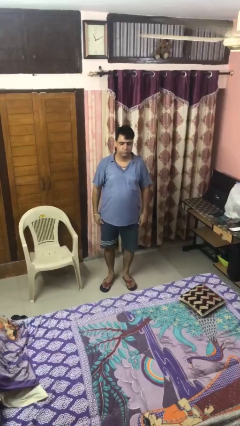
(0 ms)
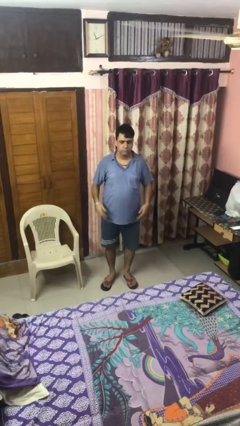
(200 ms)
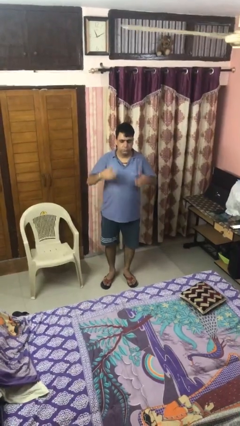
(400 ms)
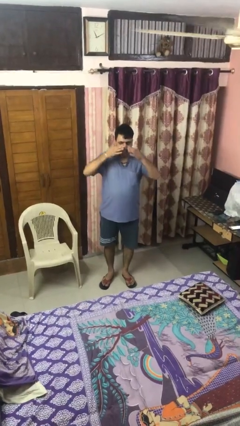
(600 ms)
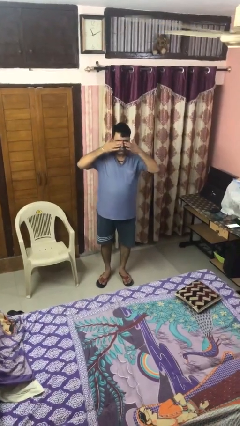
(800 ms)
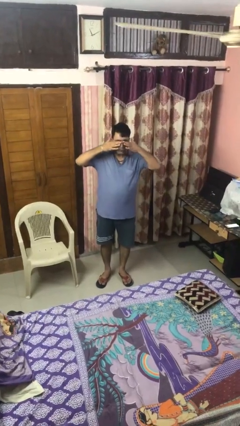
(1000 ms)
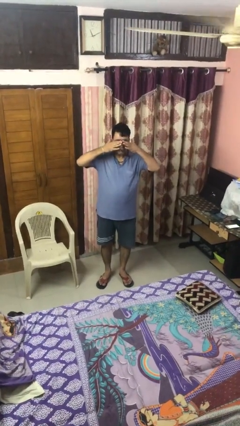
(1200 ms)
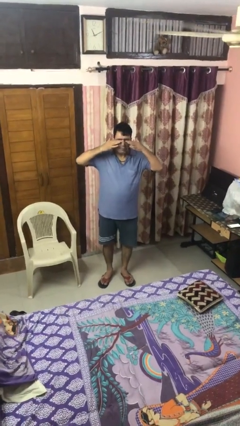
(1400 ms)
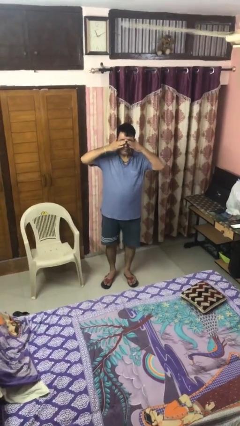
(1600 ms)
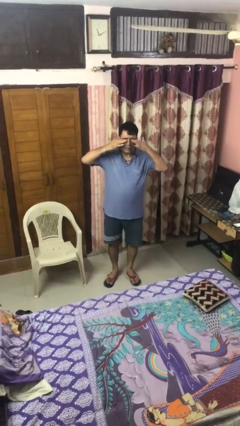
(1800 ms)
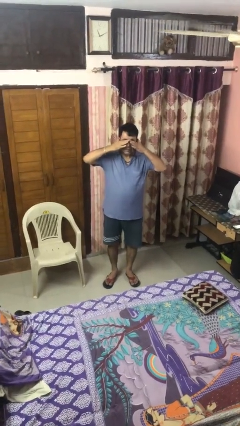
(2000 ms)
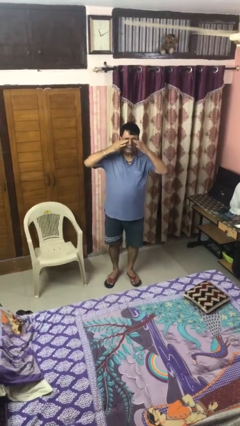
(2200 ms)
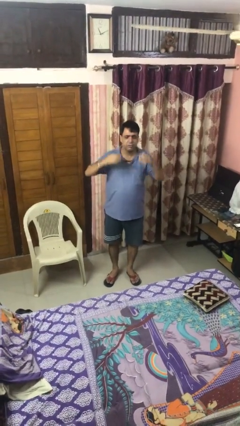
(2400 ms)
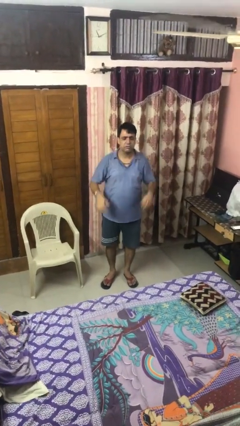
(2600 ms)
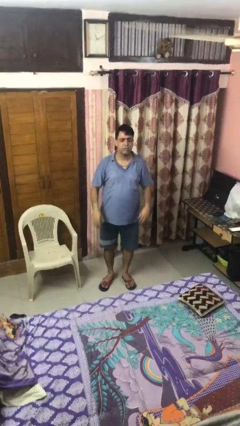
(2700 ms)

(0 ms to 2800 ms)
person rubs eyes

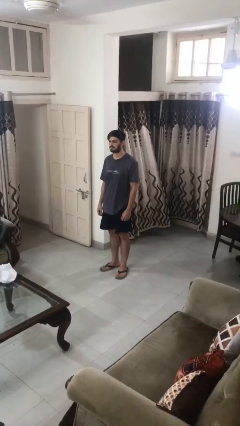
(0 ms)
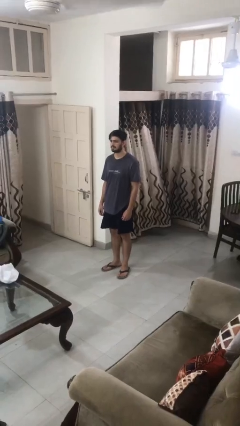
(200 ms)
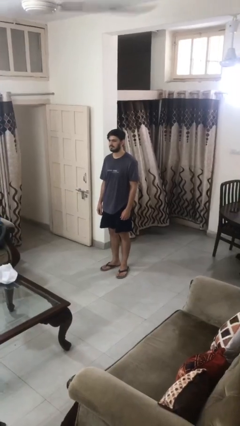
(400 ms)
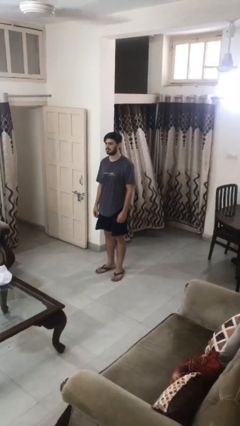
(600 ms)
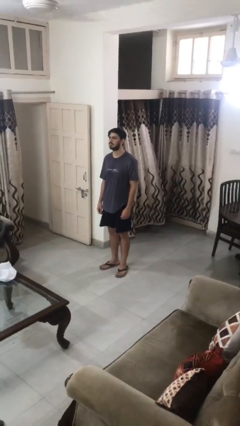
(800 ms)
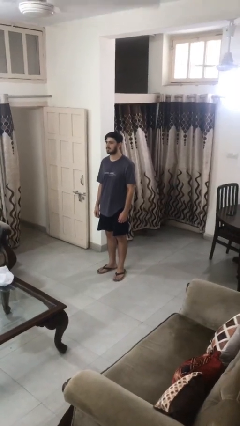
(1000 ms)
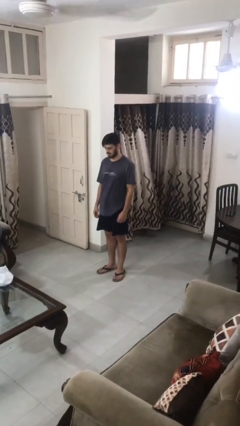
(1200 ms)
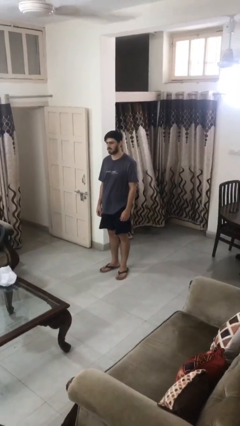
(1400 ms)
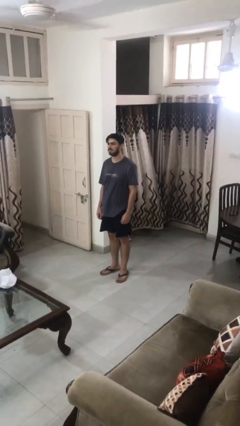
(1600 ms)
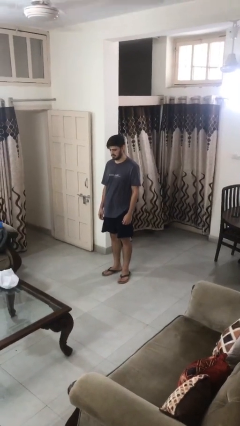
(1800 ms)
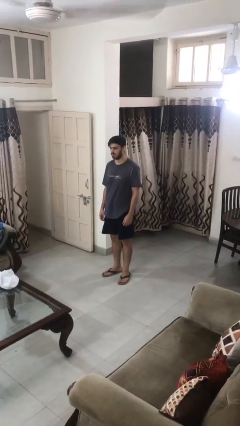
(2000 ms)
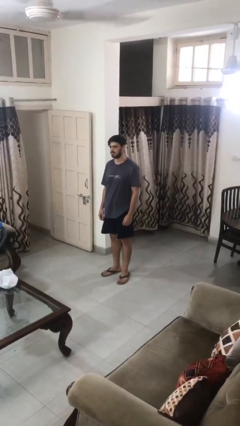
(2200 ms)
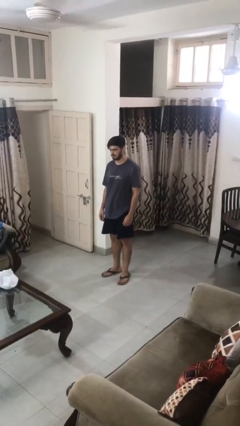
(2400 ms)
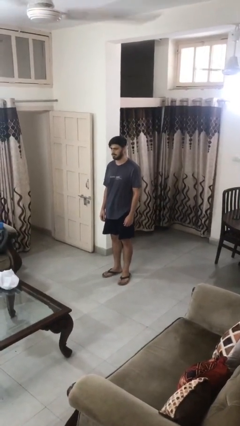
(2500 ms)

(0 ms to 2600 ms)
person nods head

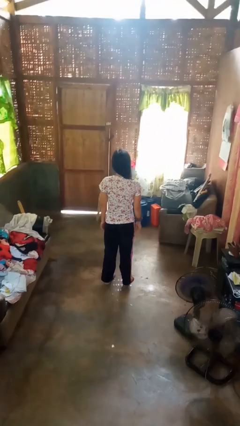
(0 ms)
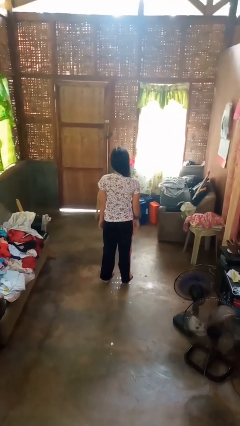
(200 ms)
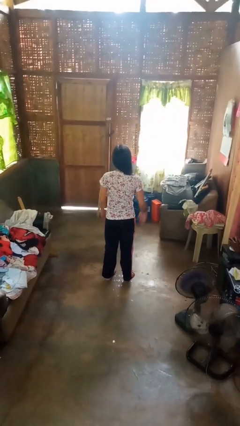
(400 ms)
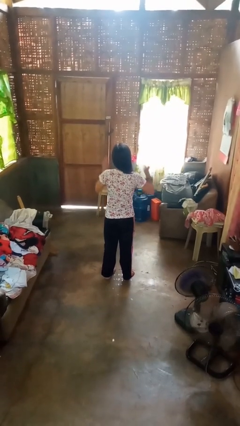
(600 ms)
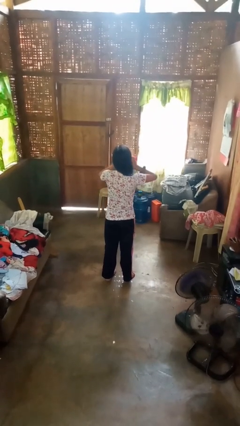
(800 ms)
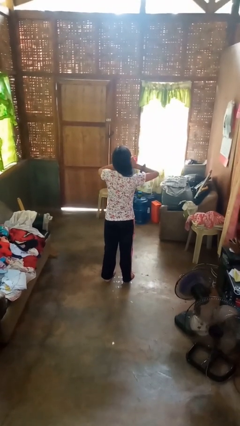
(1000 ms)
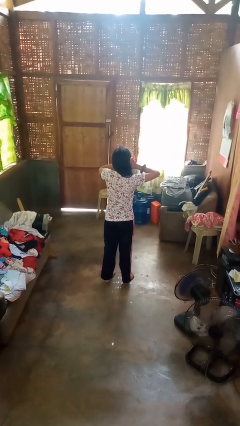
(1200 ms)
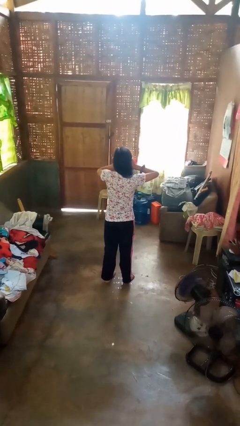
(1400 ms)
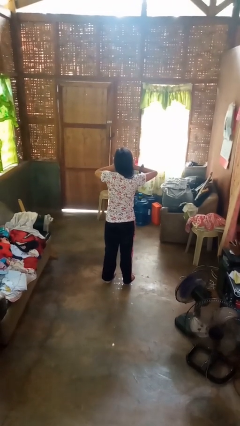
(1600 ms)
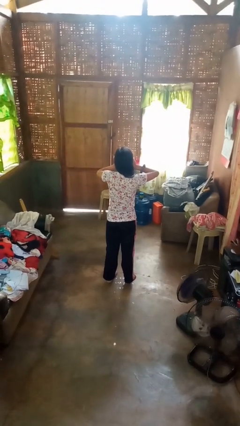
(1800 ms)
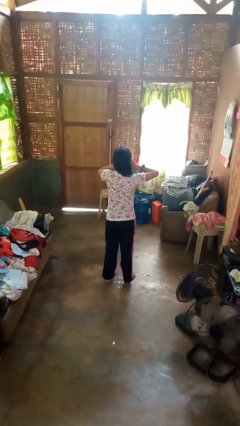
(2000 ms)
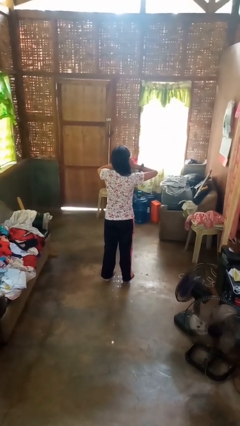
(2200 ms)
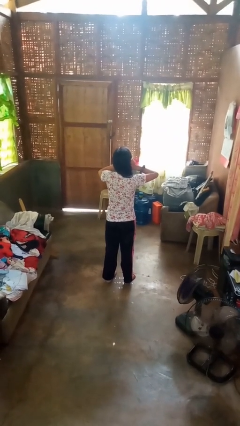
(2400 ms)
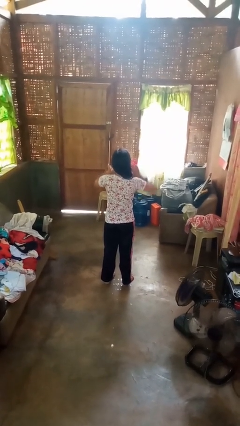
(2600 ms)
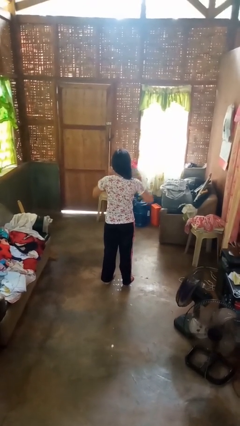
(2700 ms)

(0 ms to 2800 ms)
person puts fingers in ear

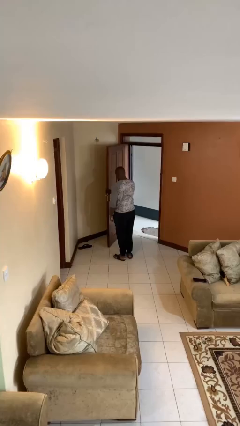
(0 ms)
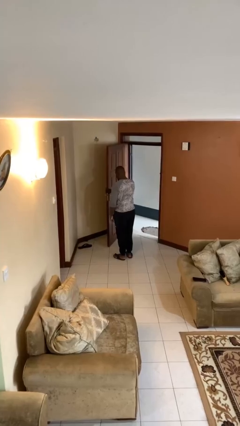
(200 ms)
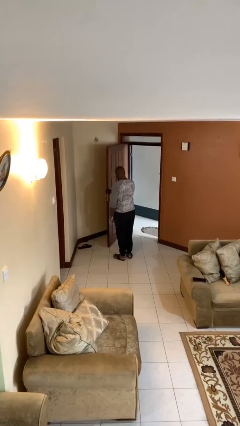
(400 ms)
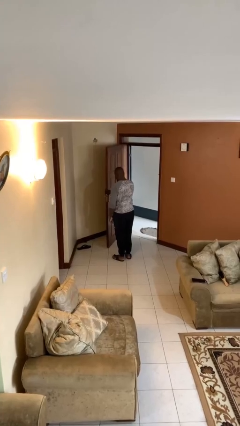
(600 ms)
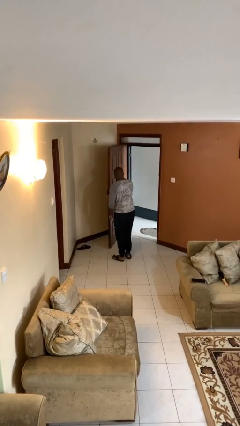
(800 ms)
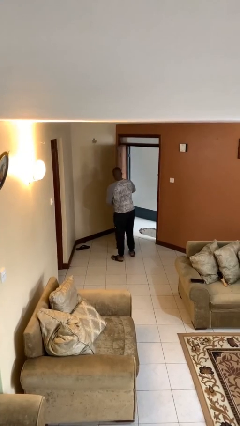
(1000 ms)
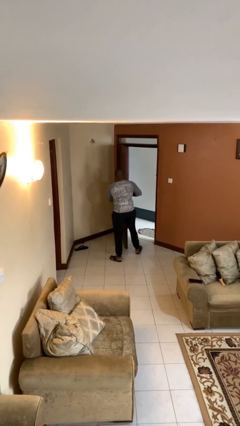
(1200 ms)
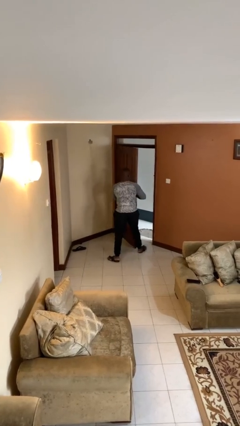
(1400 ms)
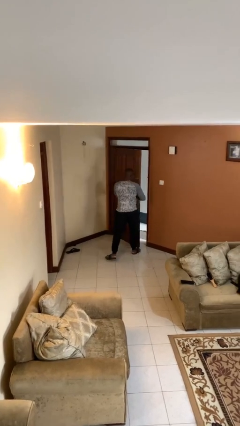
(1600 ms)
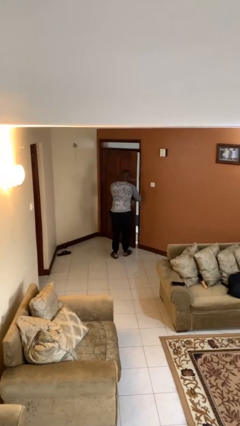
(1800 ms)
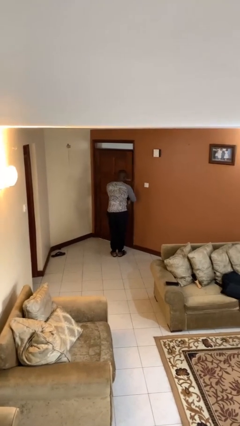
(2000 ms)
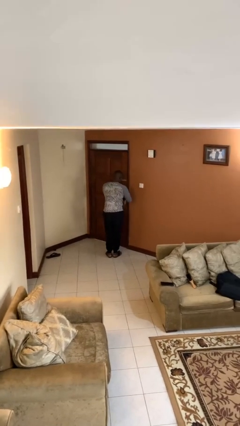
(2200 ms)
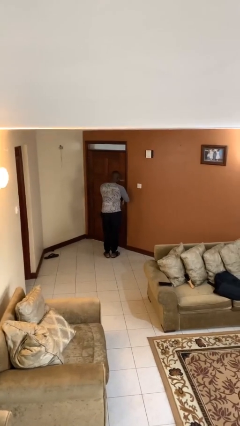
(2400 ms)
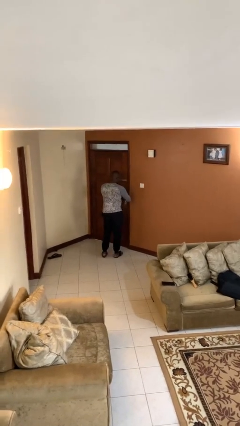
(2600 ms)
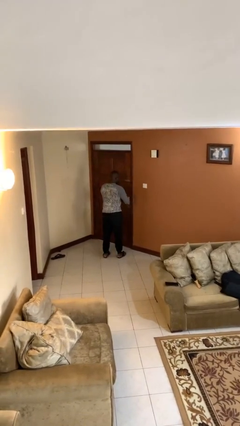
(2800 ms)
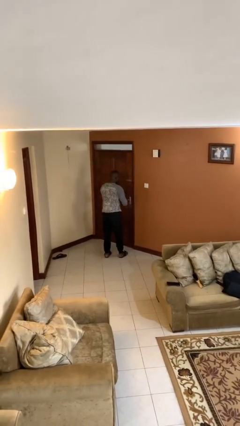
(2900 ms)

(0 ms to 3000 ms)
person closes facility door

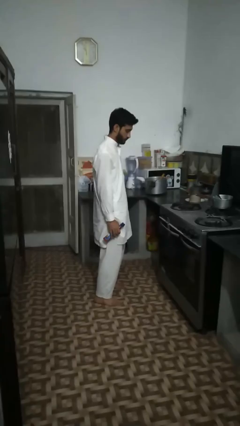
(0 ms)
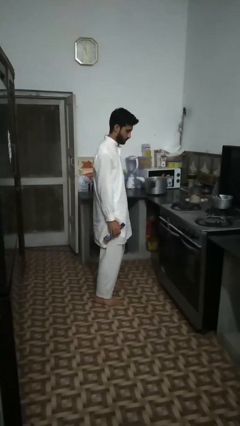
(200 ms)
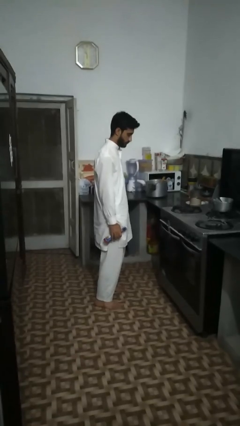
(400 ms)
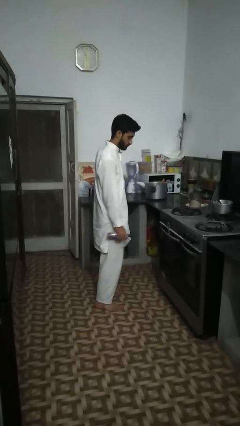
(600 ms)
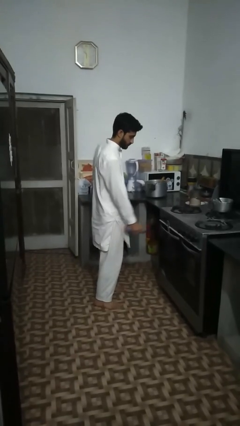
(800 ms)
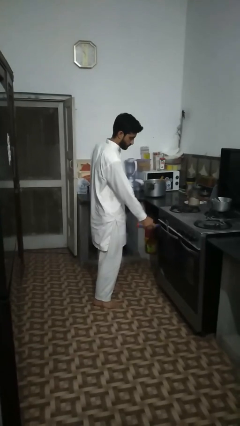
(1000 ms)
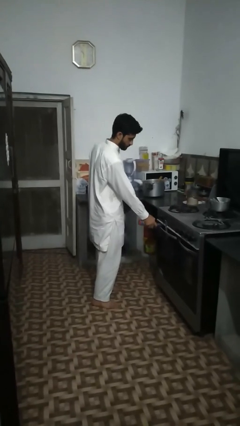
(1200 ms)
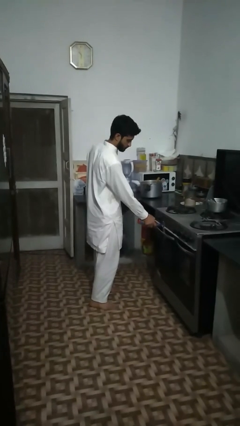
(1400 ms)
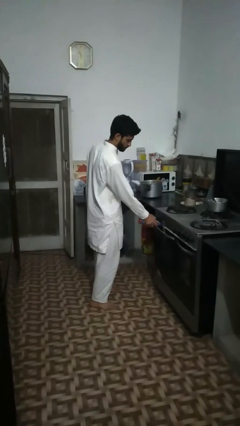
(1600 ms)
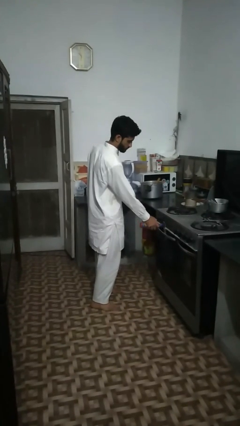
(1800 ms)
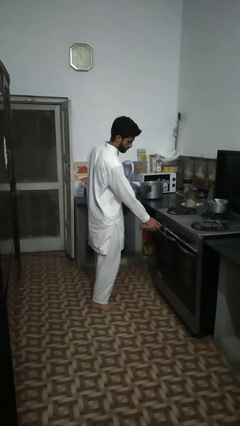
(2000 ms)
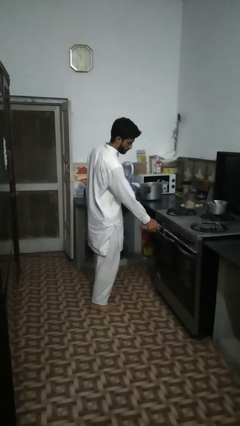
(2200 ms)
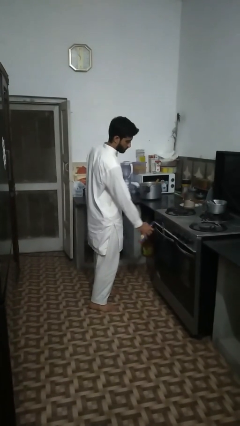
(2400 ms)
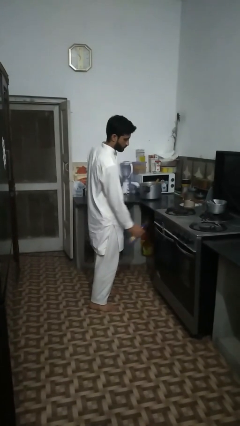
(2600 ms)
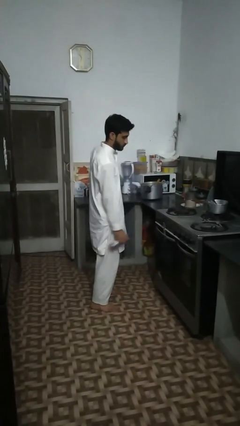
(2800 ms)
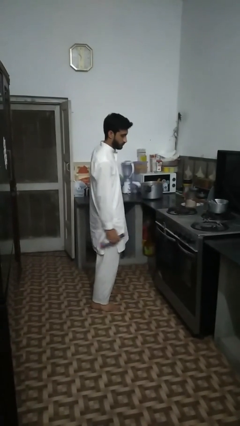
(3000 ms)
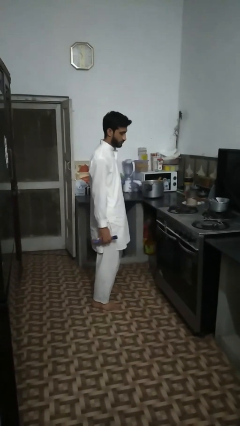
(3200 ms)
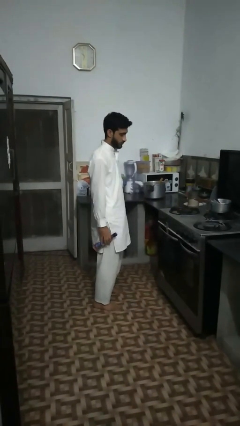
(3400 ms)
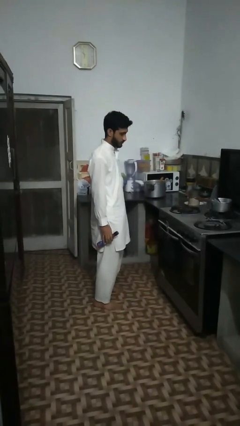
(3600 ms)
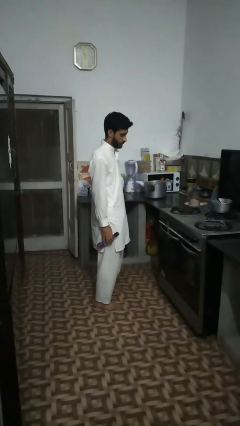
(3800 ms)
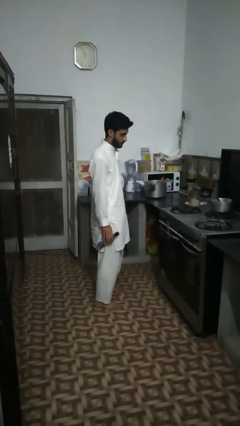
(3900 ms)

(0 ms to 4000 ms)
person opens can with can opener

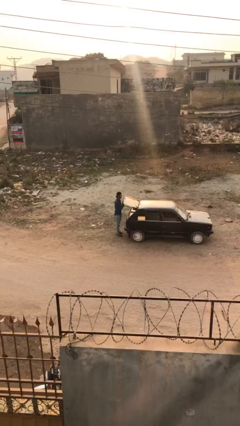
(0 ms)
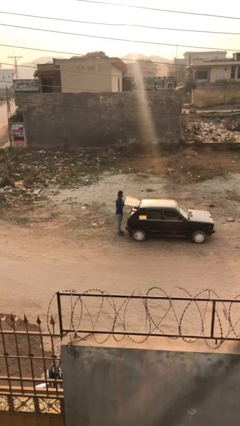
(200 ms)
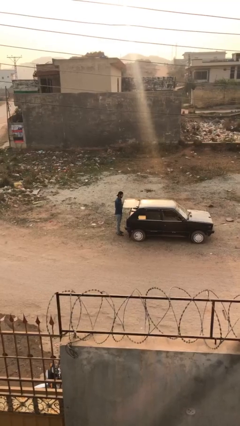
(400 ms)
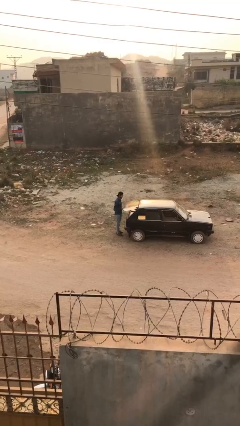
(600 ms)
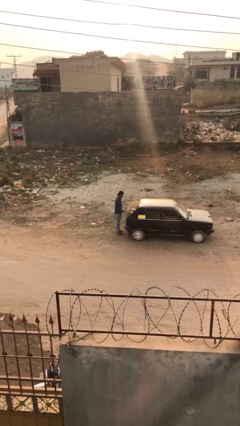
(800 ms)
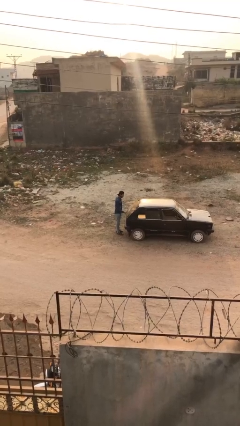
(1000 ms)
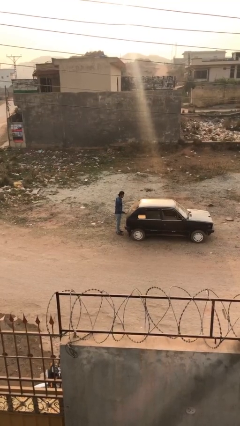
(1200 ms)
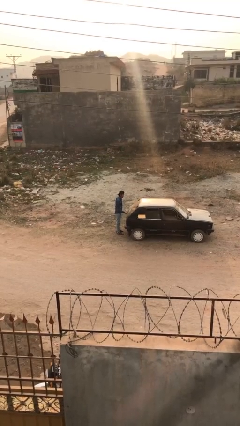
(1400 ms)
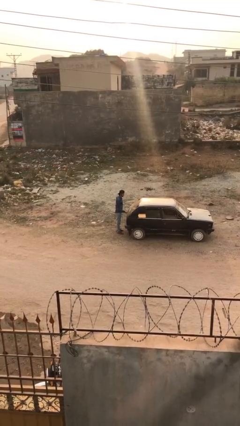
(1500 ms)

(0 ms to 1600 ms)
person closes car trunk

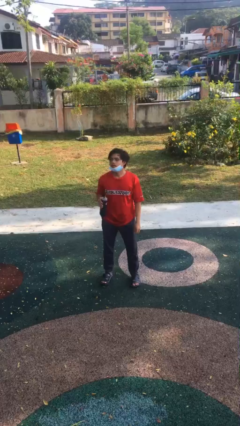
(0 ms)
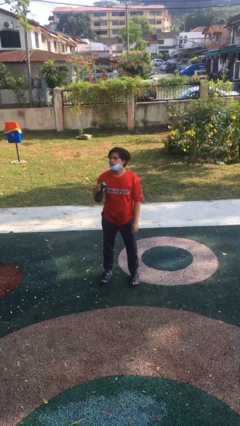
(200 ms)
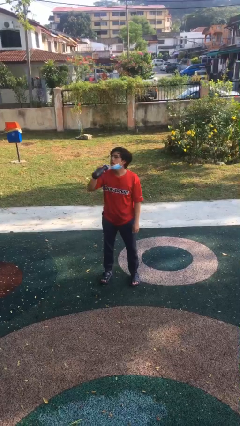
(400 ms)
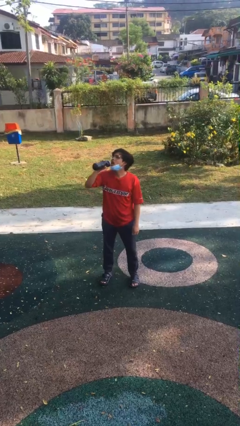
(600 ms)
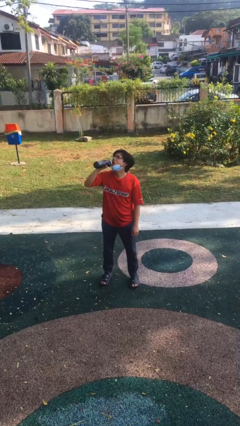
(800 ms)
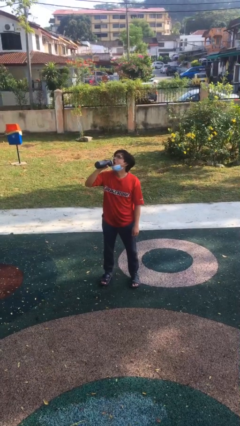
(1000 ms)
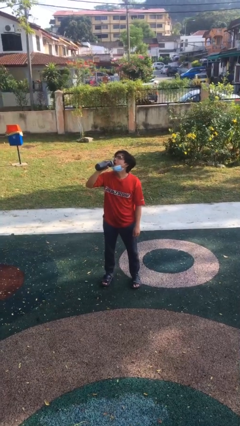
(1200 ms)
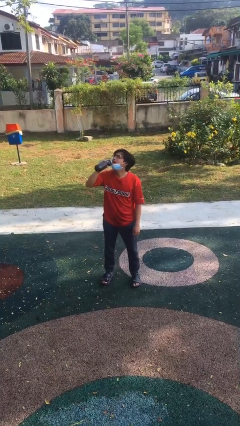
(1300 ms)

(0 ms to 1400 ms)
person drinks from bottle
